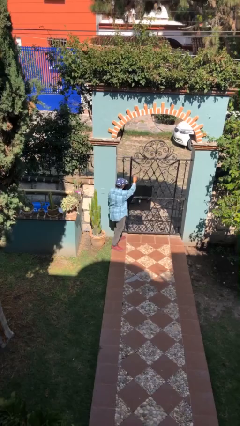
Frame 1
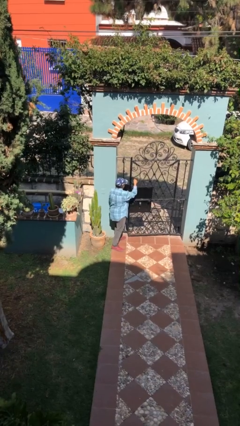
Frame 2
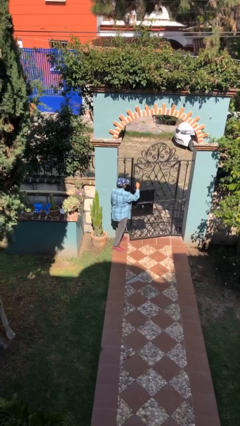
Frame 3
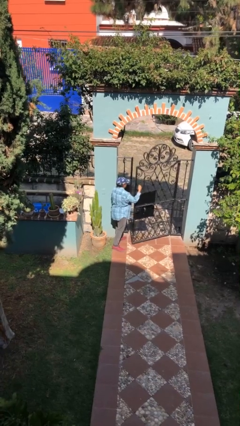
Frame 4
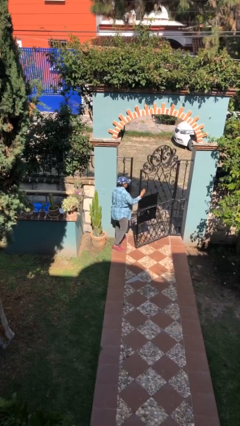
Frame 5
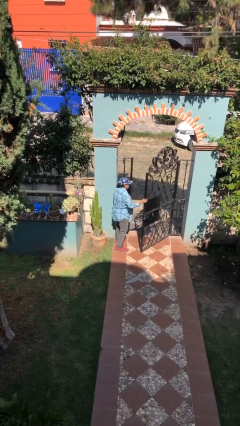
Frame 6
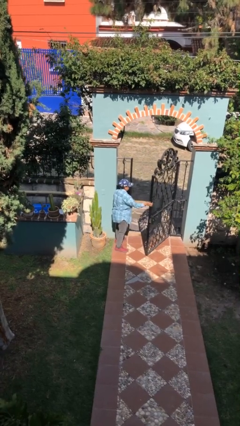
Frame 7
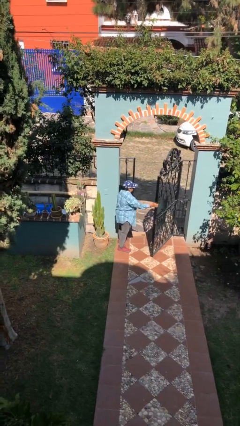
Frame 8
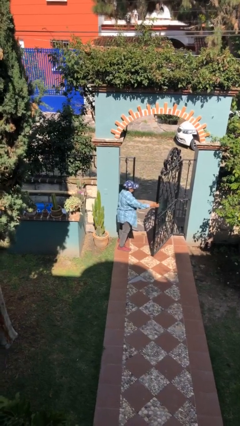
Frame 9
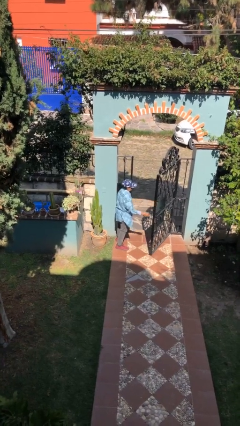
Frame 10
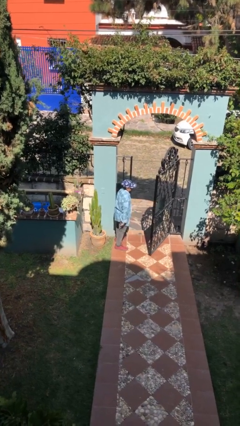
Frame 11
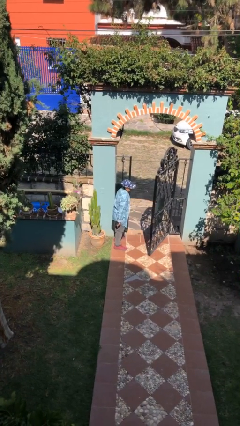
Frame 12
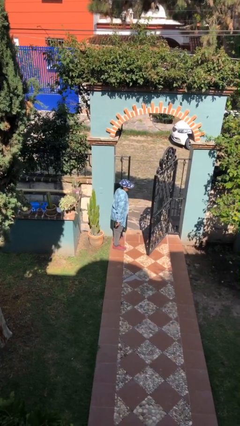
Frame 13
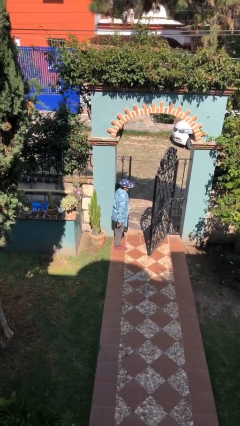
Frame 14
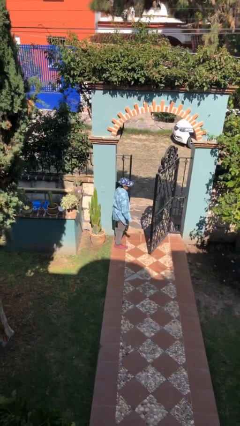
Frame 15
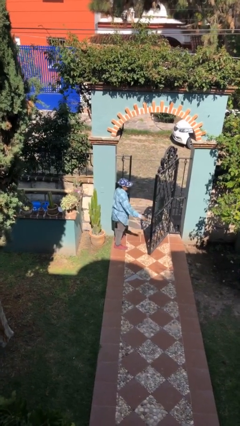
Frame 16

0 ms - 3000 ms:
person opens facility door

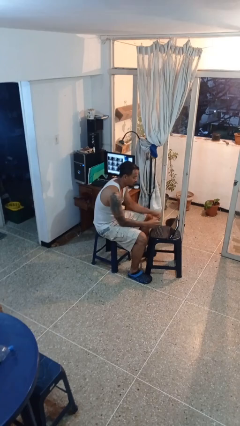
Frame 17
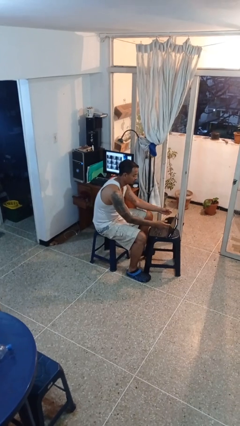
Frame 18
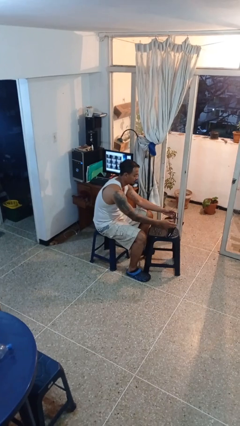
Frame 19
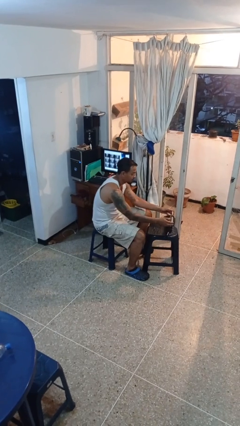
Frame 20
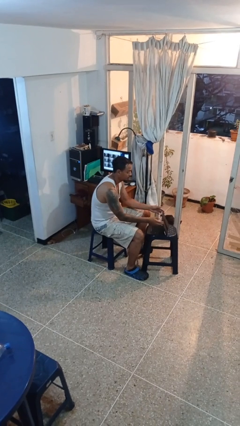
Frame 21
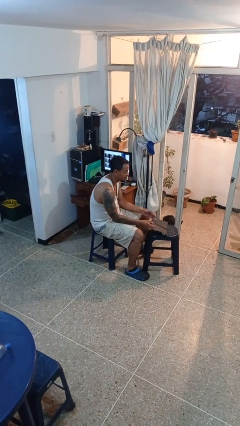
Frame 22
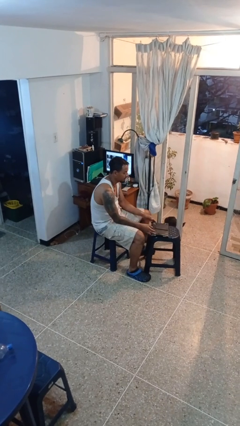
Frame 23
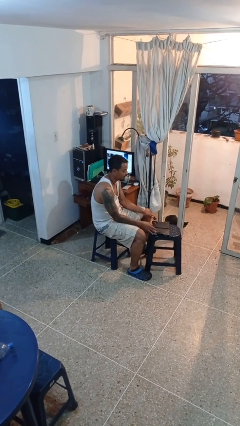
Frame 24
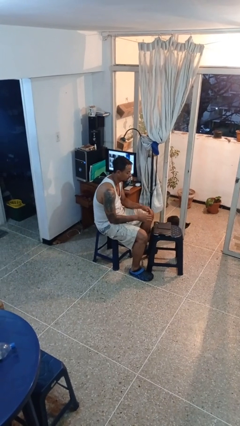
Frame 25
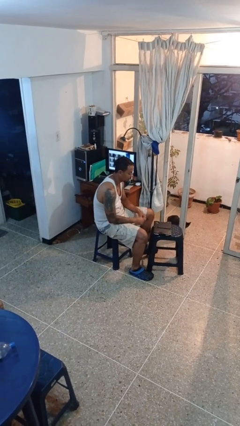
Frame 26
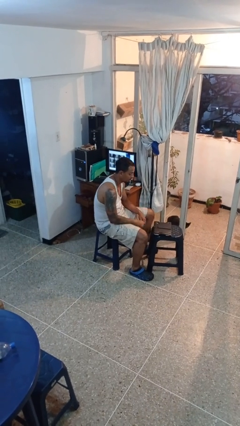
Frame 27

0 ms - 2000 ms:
person closes laptop

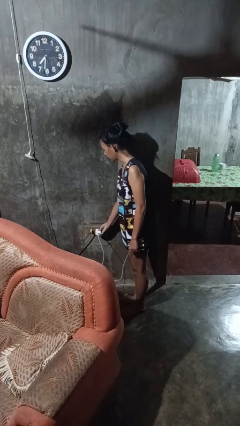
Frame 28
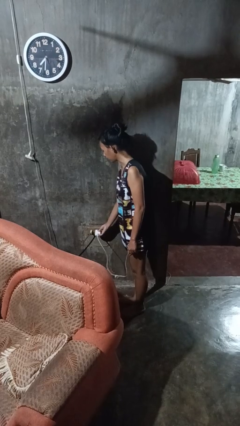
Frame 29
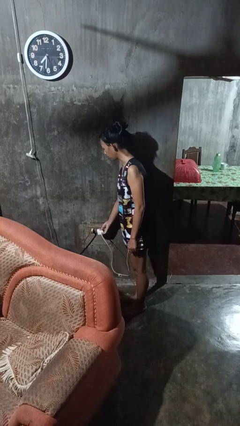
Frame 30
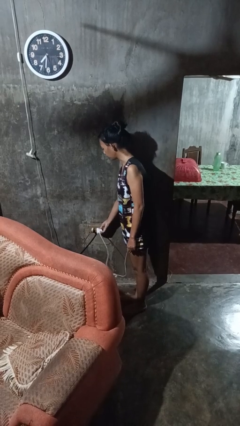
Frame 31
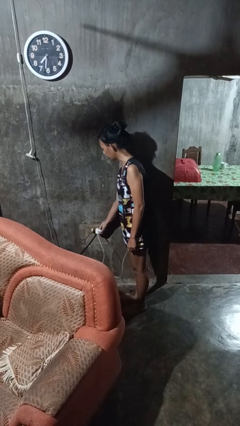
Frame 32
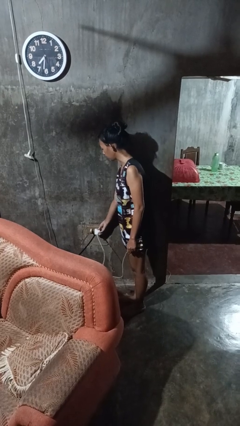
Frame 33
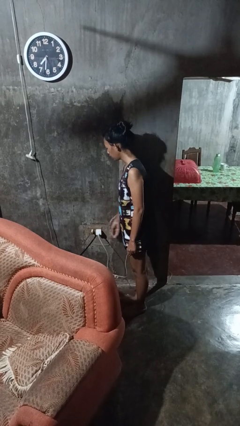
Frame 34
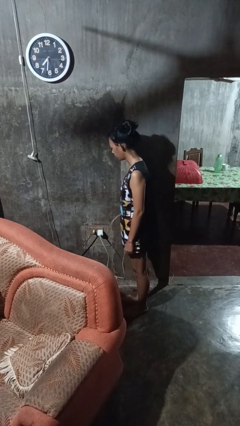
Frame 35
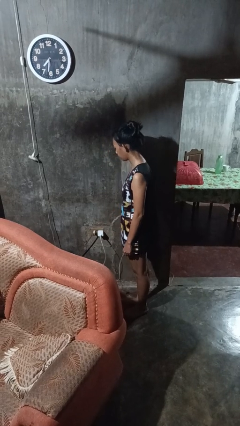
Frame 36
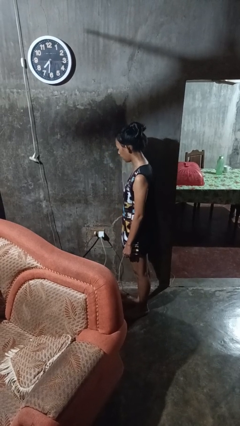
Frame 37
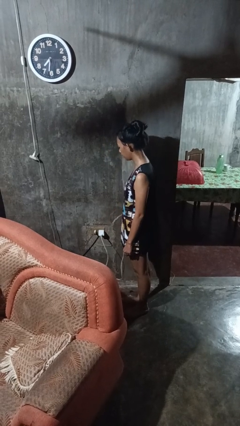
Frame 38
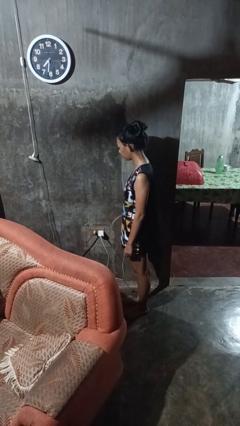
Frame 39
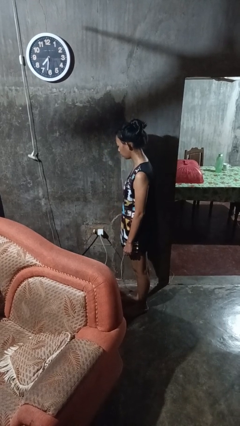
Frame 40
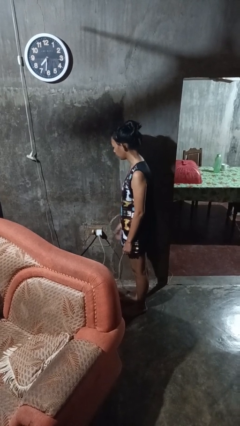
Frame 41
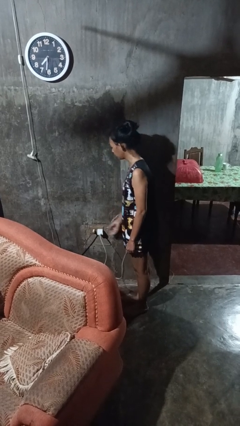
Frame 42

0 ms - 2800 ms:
person plugs into electrical socket

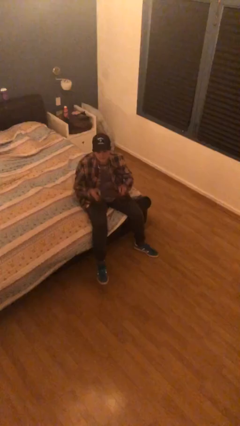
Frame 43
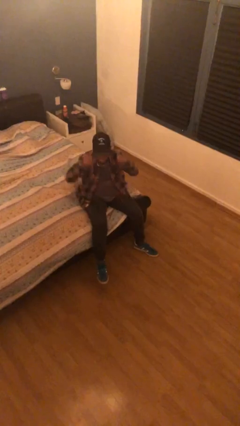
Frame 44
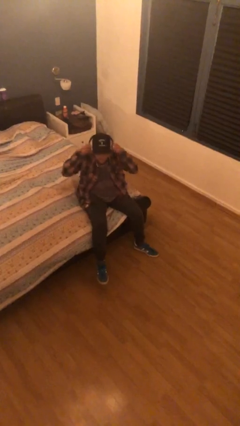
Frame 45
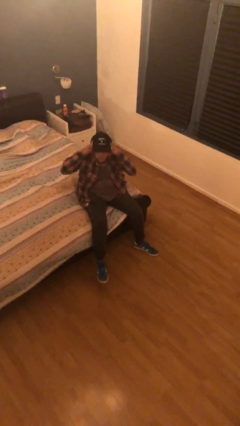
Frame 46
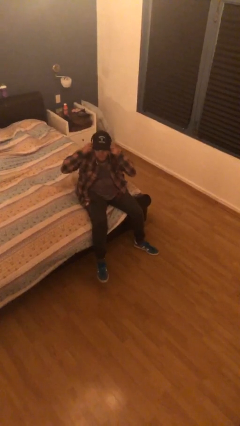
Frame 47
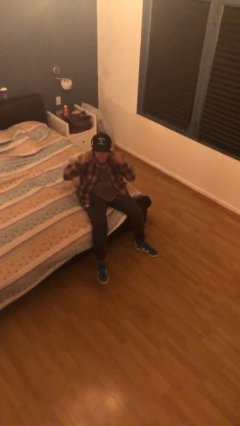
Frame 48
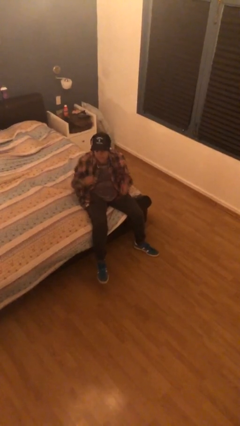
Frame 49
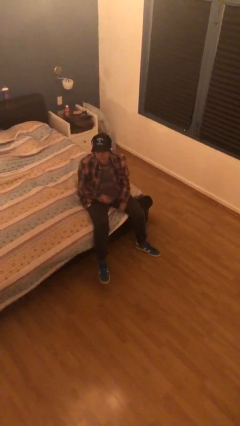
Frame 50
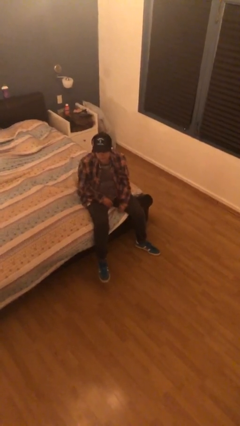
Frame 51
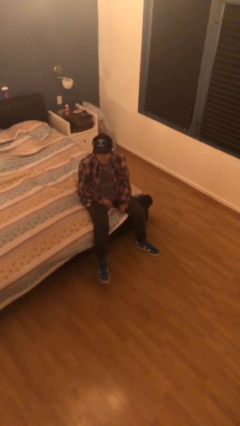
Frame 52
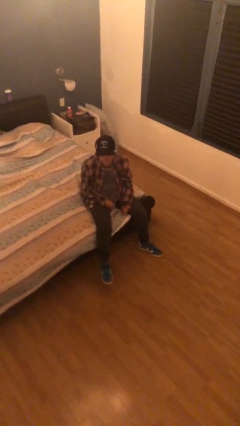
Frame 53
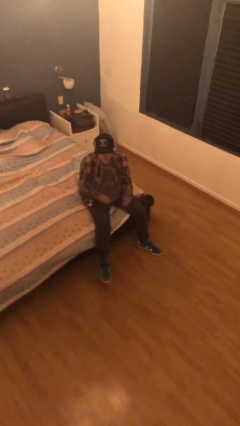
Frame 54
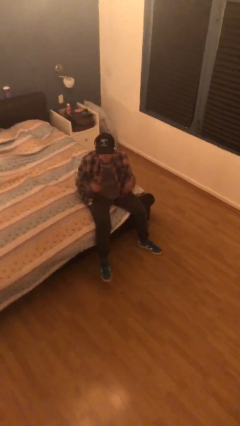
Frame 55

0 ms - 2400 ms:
person puts on headphones

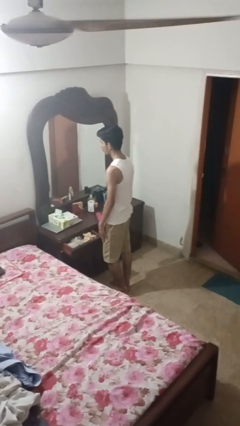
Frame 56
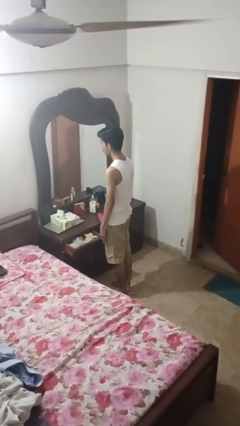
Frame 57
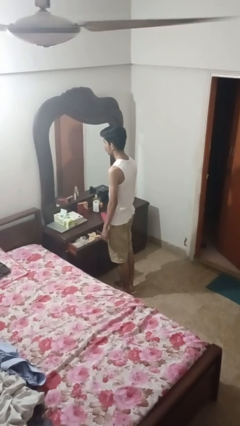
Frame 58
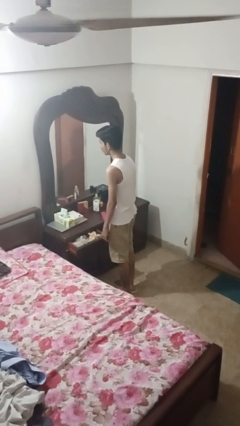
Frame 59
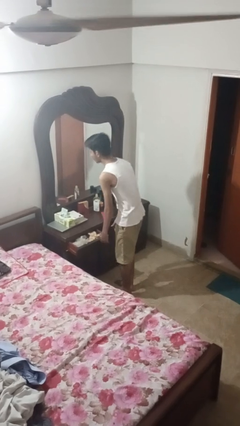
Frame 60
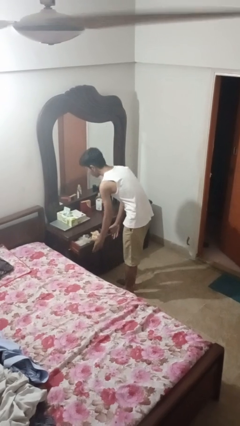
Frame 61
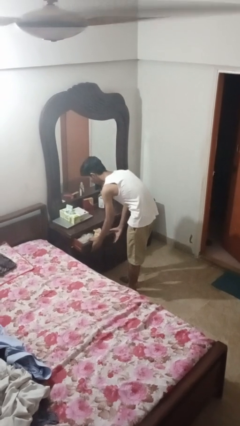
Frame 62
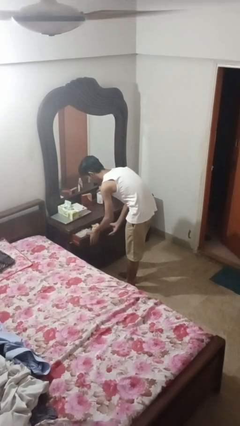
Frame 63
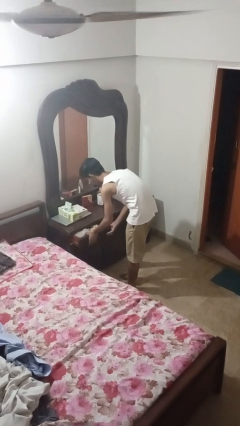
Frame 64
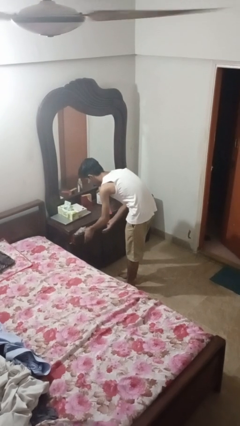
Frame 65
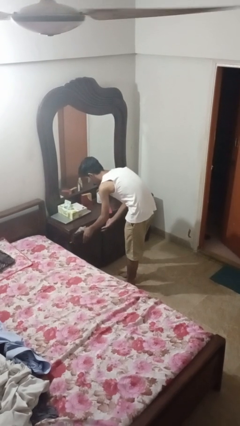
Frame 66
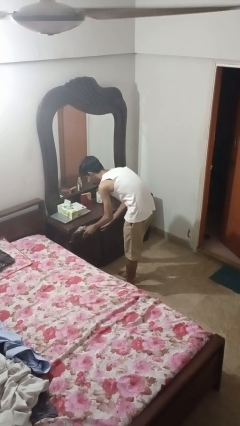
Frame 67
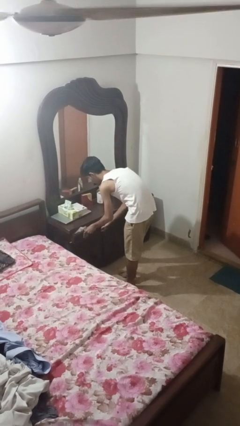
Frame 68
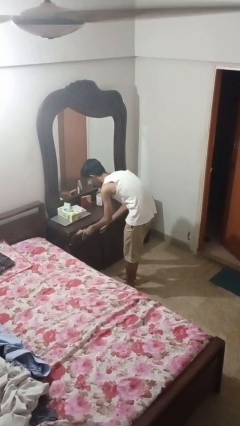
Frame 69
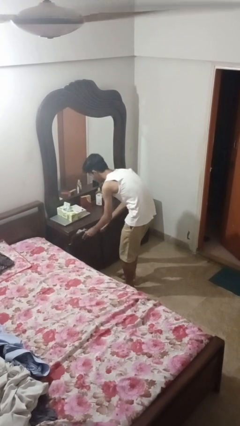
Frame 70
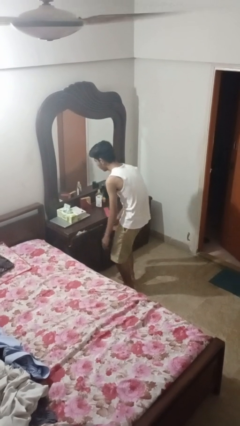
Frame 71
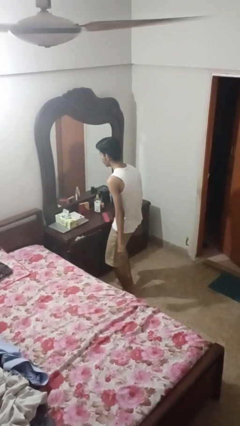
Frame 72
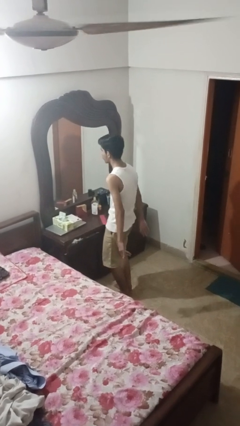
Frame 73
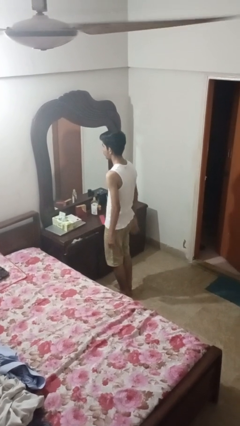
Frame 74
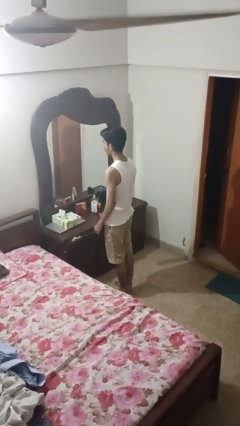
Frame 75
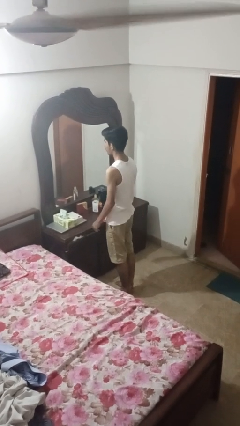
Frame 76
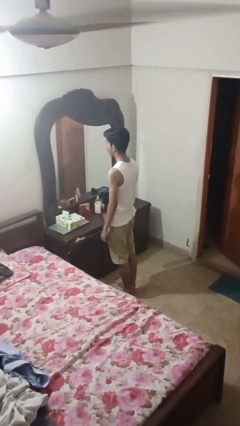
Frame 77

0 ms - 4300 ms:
person closes dresser drawer

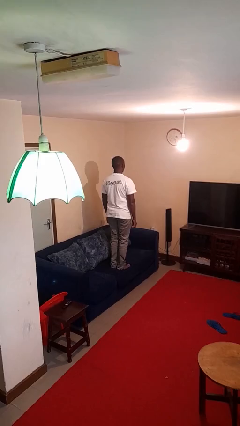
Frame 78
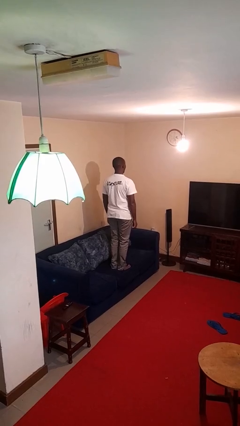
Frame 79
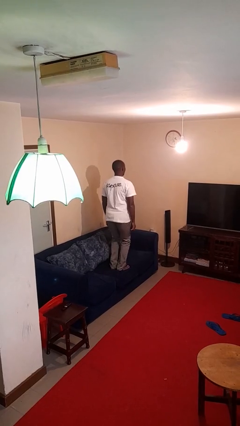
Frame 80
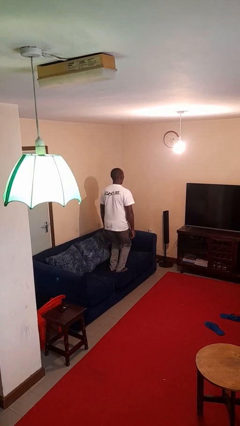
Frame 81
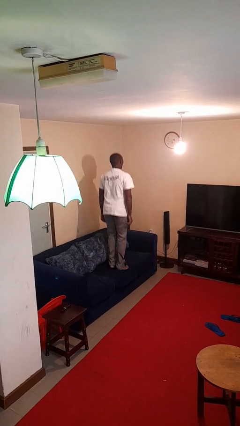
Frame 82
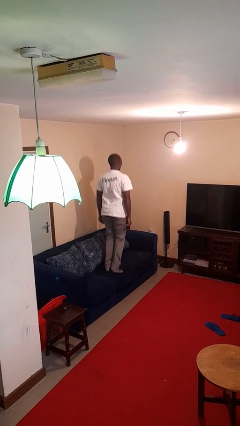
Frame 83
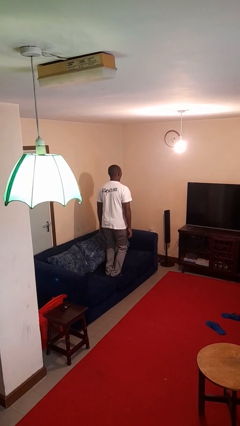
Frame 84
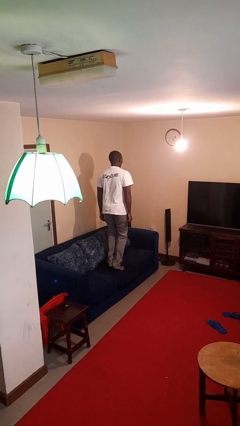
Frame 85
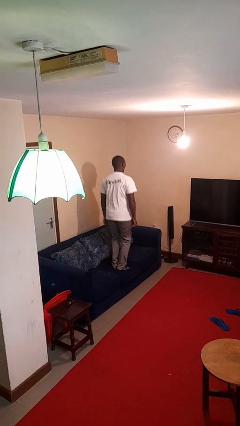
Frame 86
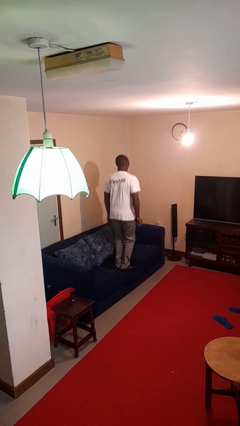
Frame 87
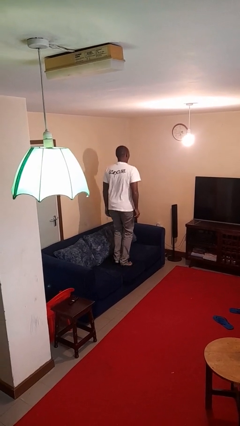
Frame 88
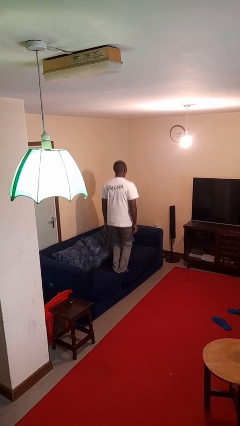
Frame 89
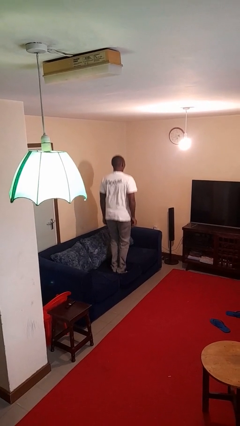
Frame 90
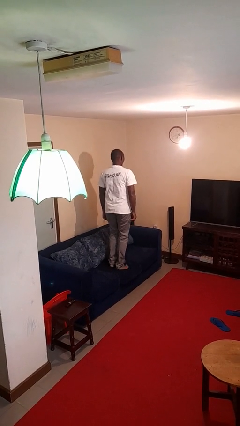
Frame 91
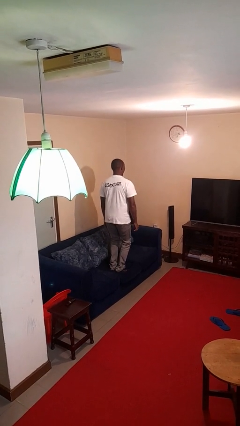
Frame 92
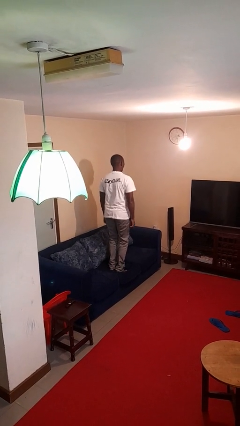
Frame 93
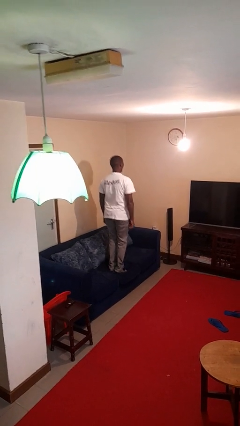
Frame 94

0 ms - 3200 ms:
person jumps on couch
